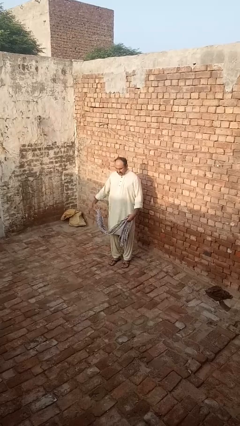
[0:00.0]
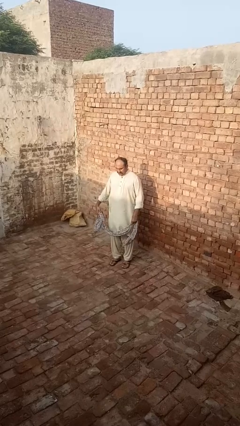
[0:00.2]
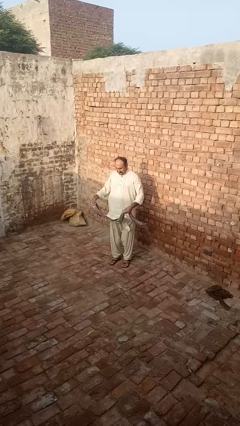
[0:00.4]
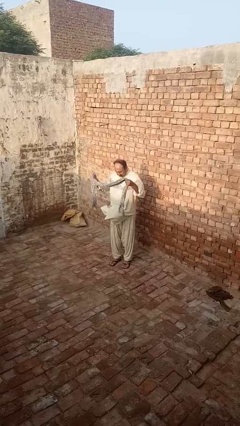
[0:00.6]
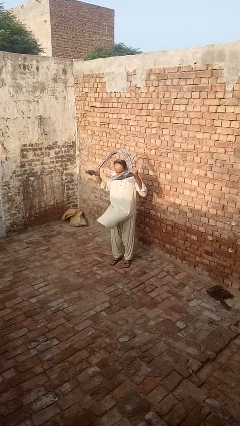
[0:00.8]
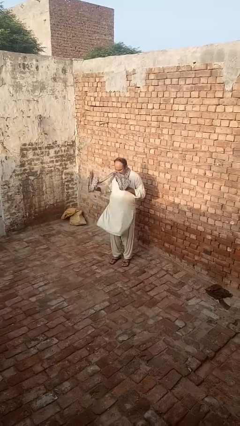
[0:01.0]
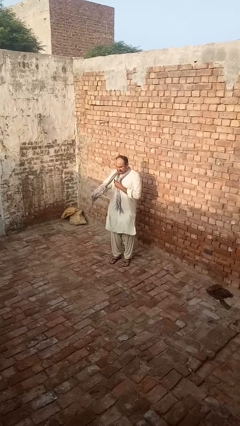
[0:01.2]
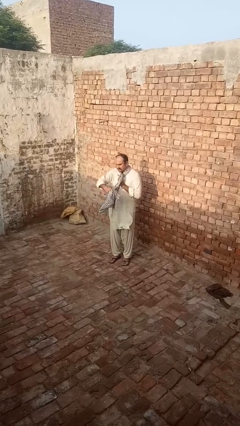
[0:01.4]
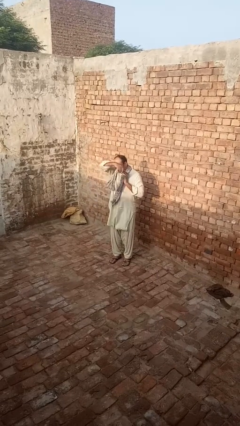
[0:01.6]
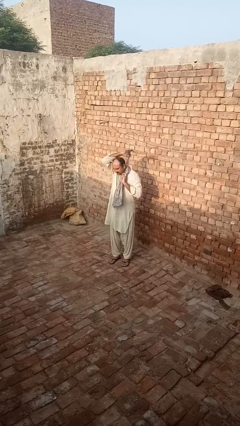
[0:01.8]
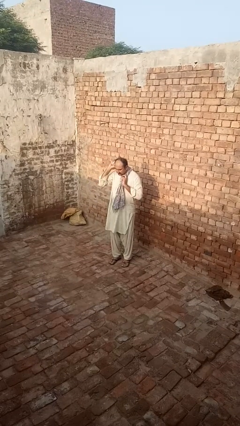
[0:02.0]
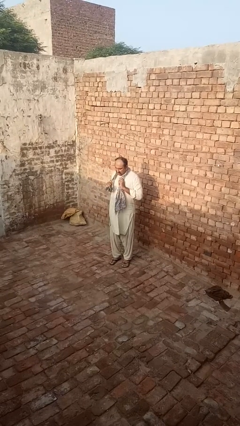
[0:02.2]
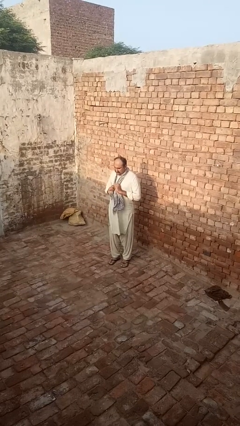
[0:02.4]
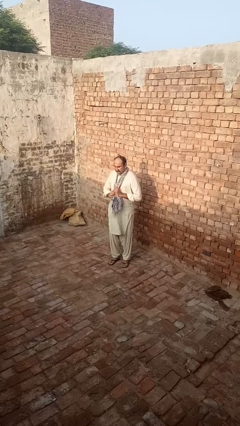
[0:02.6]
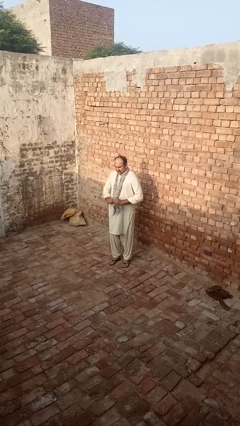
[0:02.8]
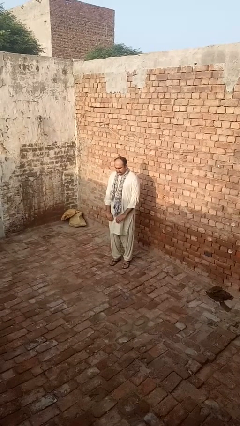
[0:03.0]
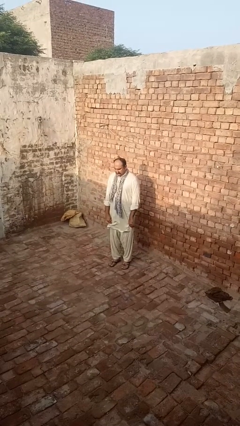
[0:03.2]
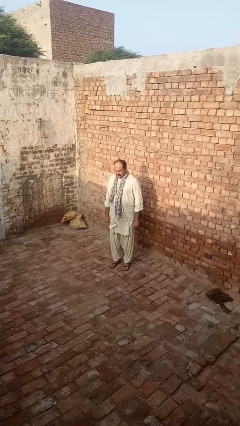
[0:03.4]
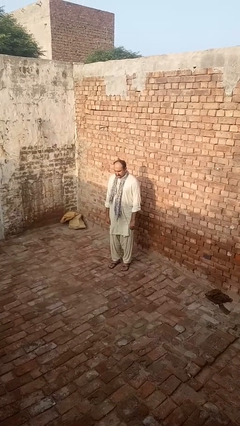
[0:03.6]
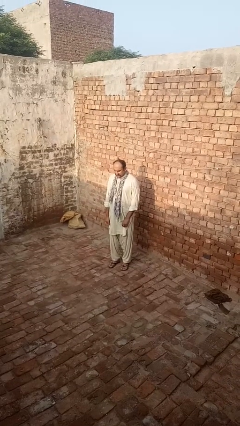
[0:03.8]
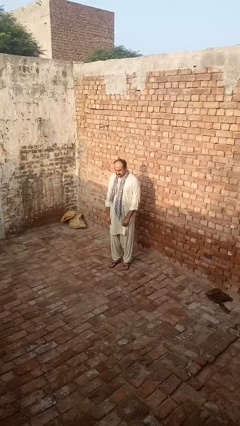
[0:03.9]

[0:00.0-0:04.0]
person puts on scarf

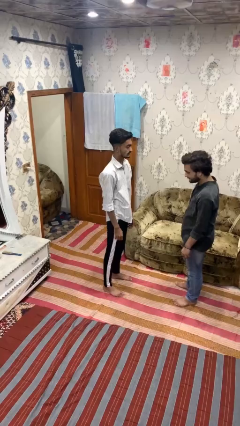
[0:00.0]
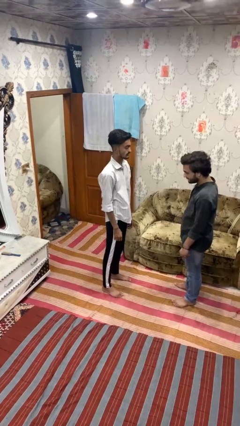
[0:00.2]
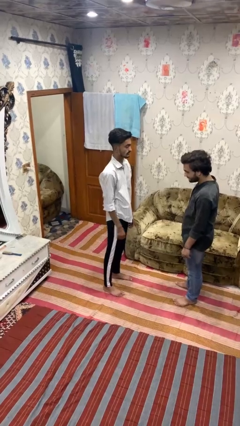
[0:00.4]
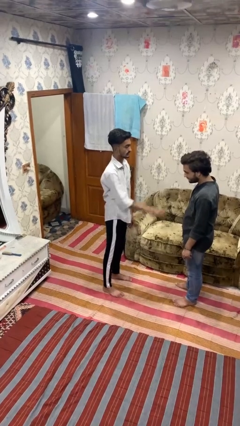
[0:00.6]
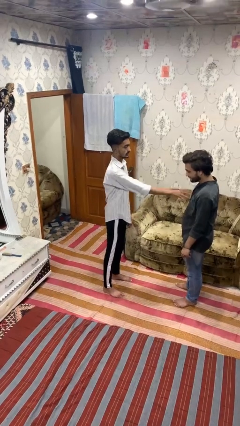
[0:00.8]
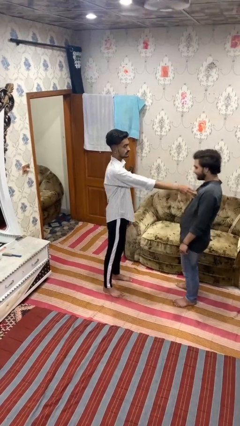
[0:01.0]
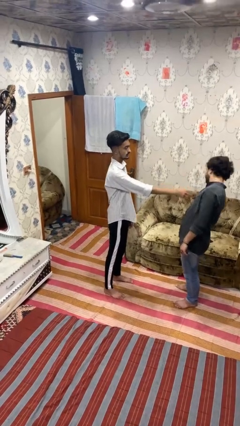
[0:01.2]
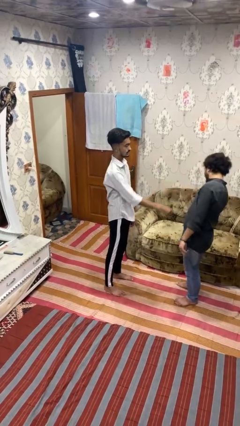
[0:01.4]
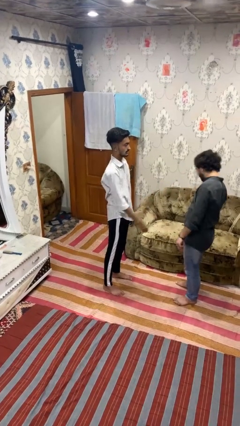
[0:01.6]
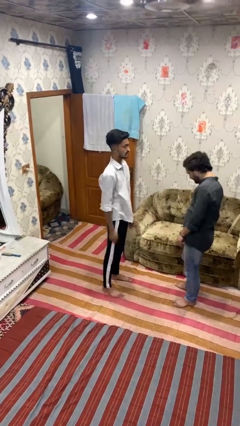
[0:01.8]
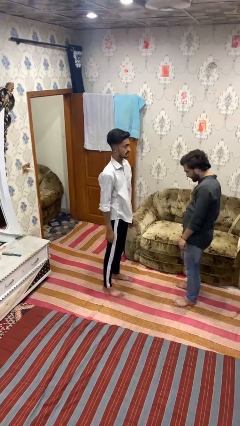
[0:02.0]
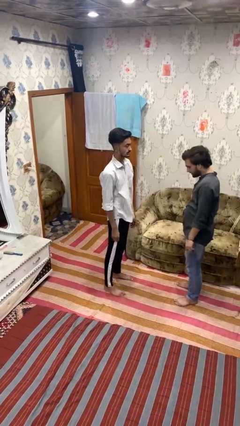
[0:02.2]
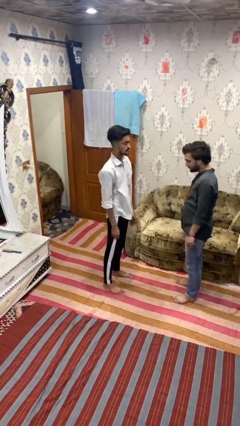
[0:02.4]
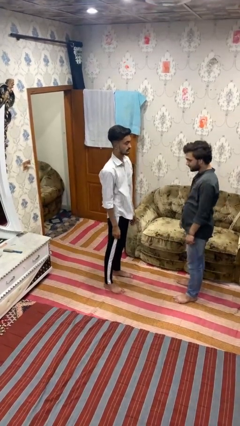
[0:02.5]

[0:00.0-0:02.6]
person shoves person

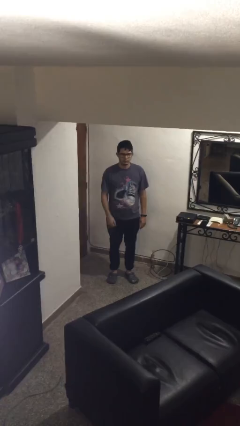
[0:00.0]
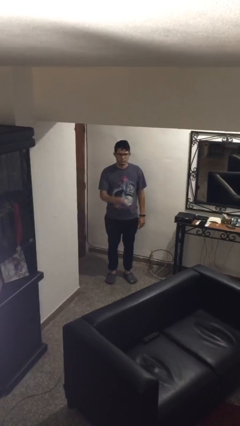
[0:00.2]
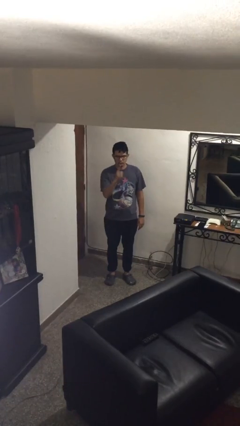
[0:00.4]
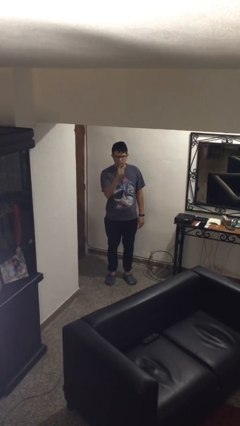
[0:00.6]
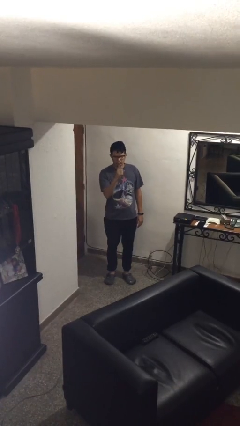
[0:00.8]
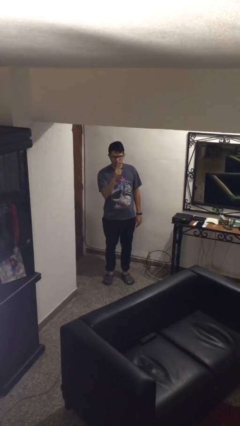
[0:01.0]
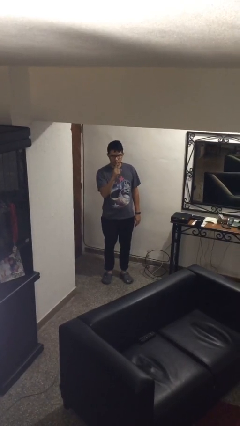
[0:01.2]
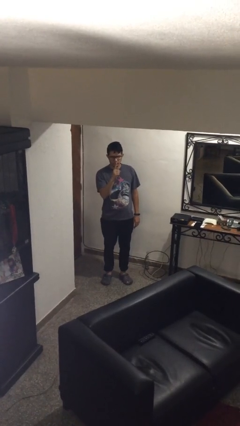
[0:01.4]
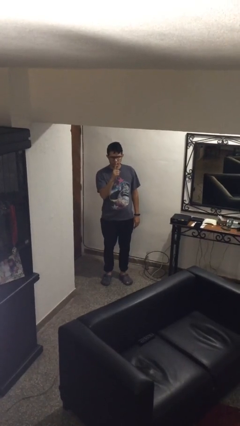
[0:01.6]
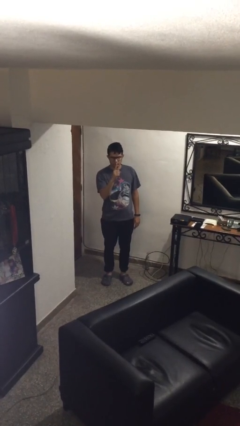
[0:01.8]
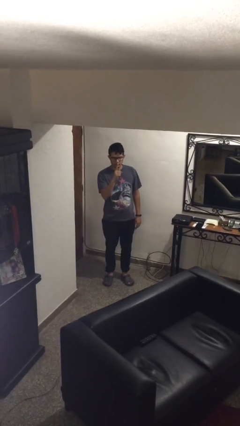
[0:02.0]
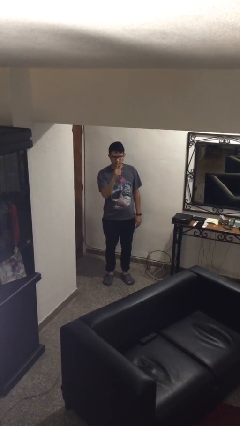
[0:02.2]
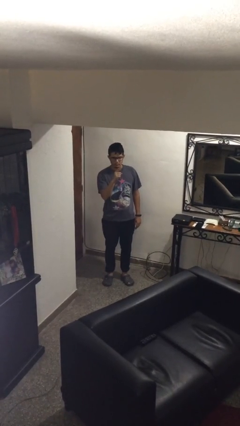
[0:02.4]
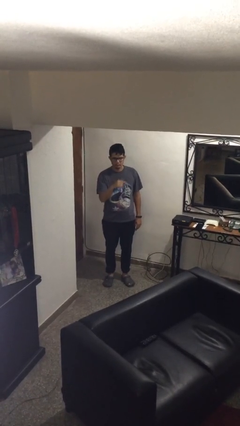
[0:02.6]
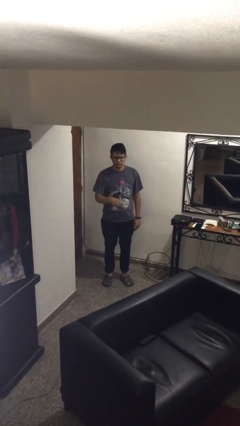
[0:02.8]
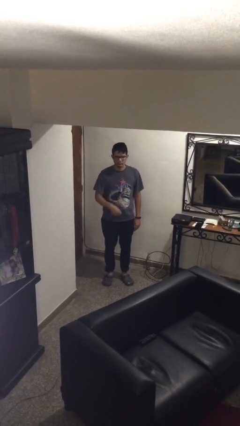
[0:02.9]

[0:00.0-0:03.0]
person gestures number one

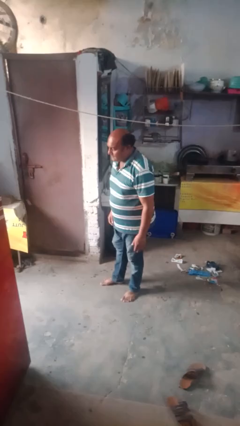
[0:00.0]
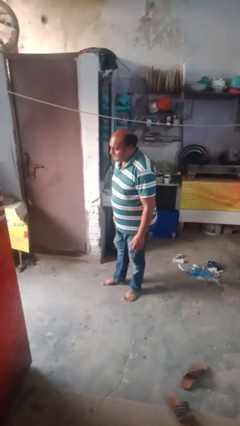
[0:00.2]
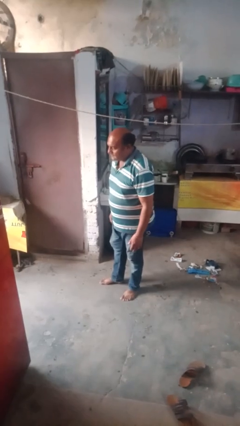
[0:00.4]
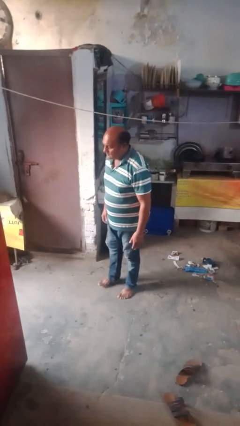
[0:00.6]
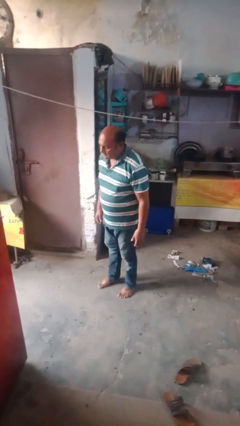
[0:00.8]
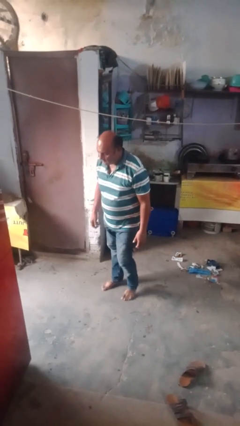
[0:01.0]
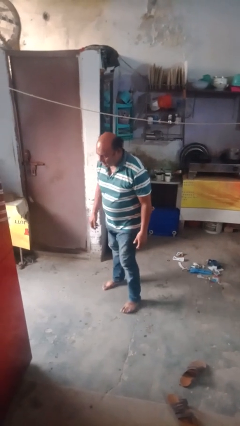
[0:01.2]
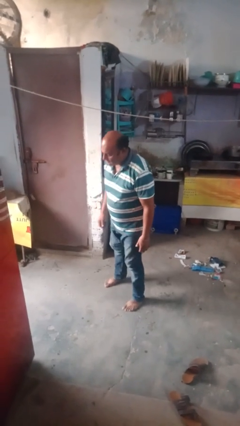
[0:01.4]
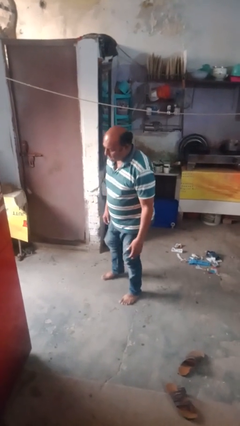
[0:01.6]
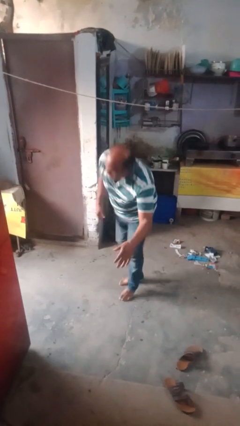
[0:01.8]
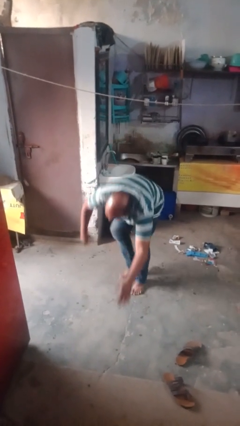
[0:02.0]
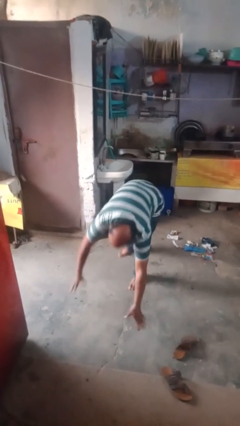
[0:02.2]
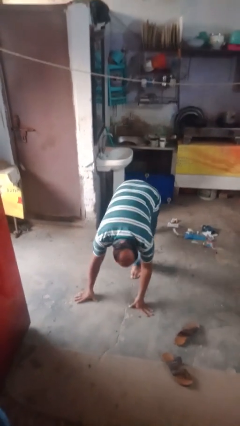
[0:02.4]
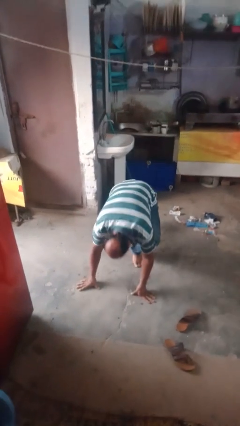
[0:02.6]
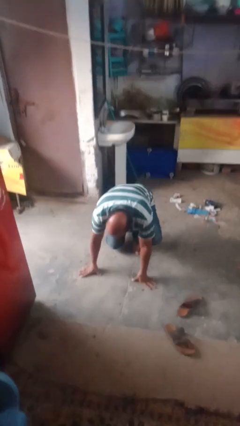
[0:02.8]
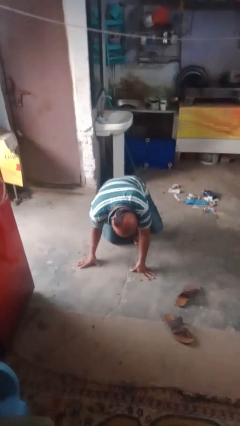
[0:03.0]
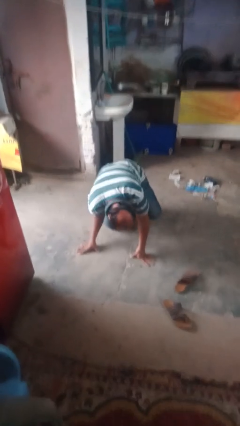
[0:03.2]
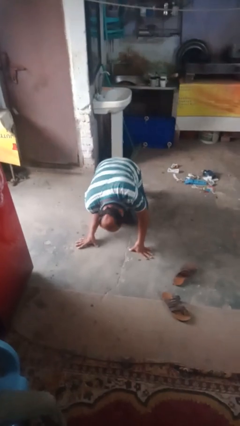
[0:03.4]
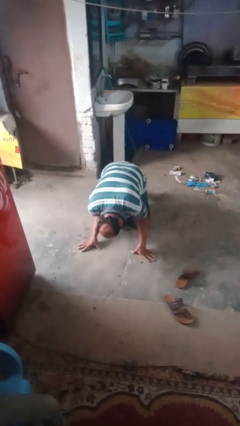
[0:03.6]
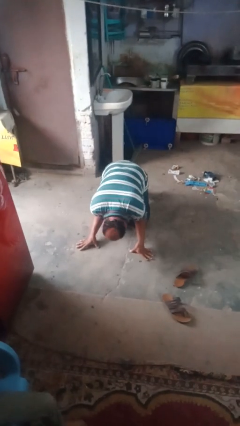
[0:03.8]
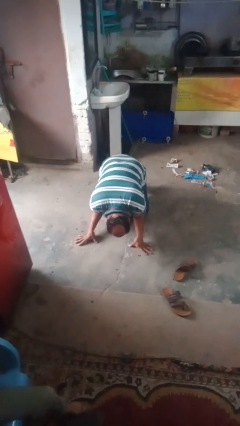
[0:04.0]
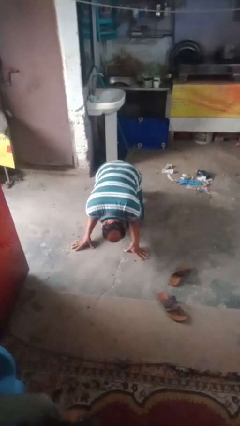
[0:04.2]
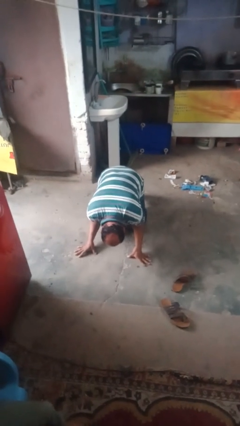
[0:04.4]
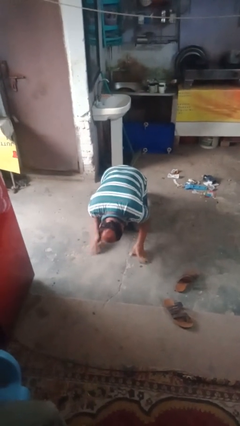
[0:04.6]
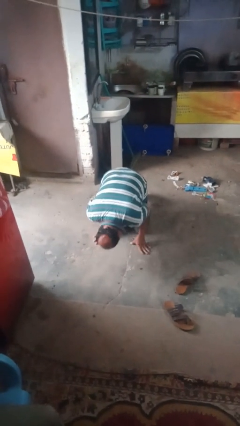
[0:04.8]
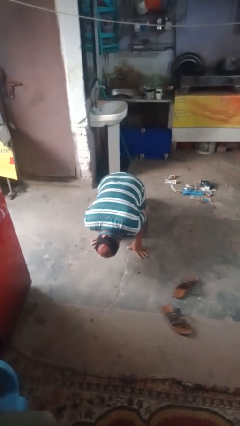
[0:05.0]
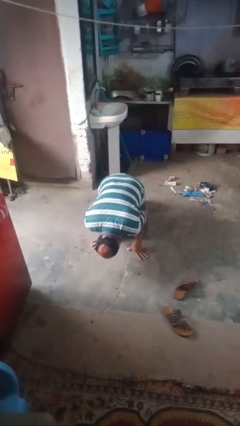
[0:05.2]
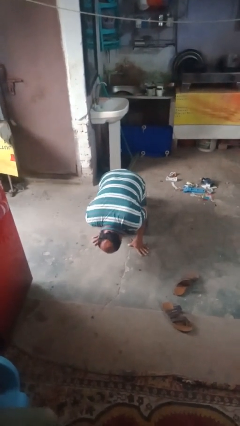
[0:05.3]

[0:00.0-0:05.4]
person trips on object on floor

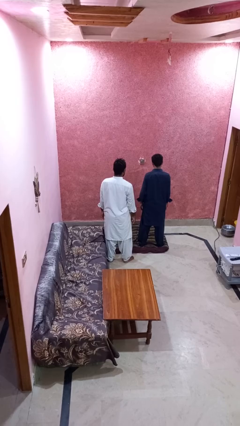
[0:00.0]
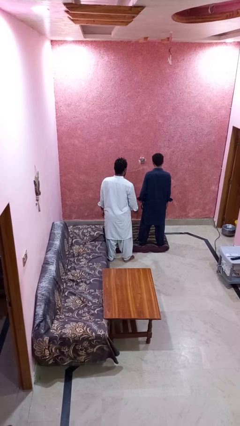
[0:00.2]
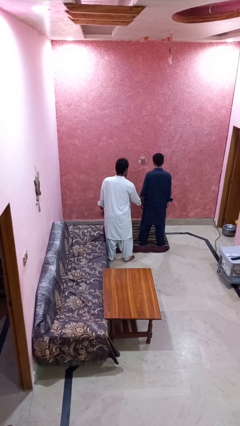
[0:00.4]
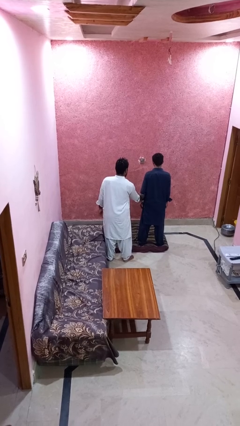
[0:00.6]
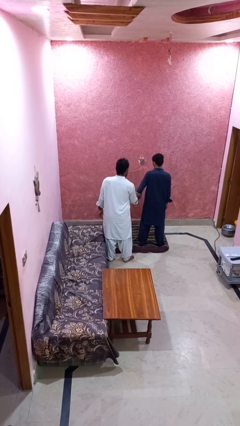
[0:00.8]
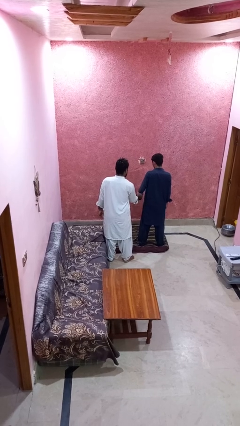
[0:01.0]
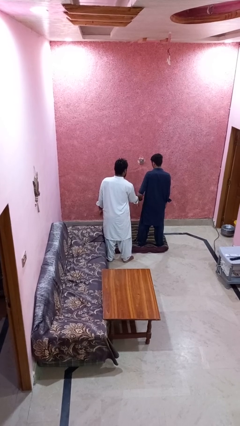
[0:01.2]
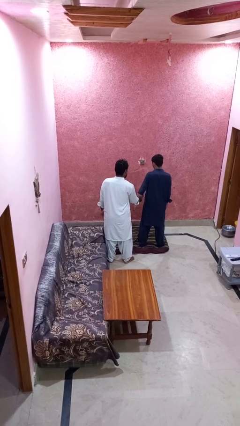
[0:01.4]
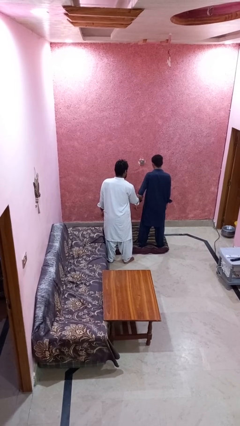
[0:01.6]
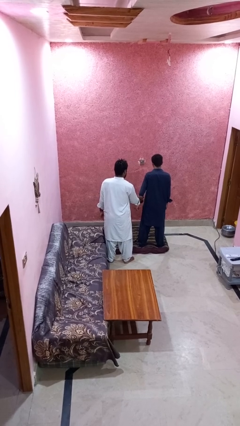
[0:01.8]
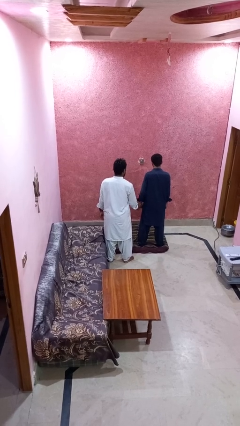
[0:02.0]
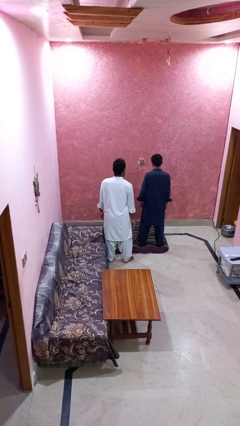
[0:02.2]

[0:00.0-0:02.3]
person grabs person by bicep

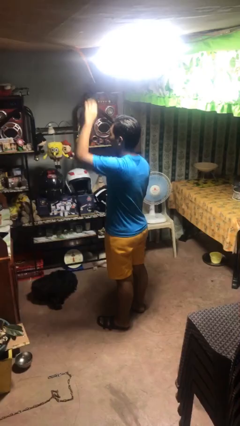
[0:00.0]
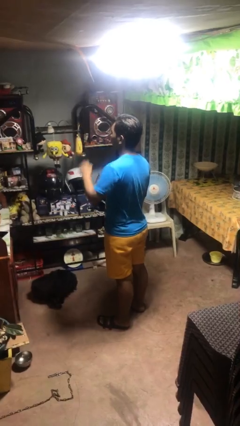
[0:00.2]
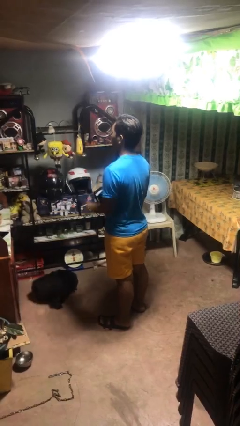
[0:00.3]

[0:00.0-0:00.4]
person gestures lower hand
